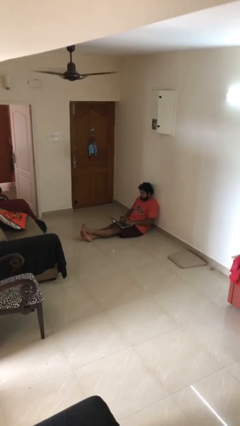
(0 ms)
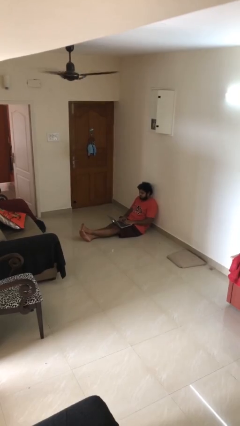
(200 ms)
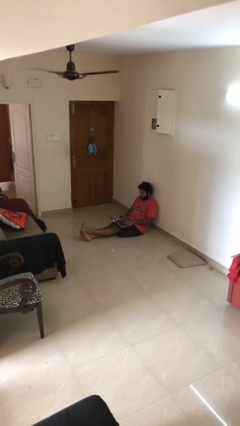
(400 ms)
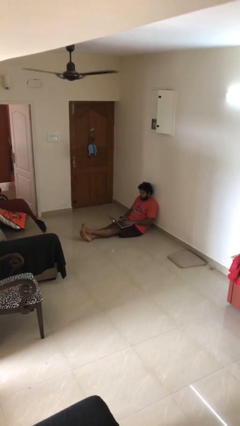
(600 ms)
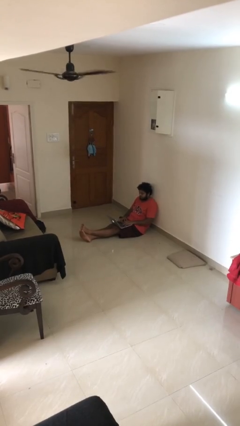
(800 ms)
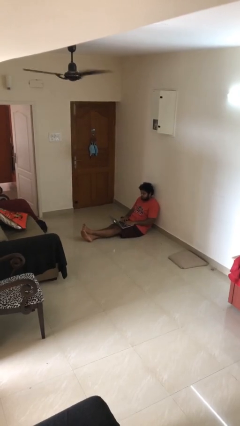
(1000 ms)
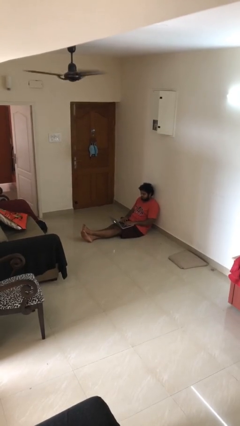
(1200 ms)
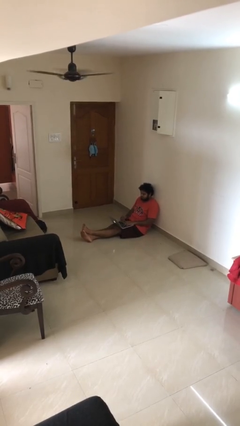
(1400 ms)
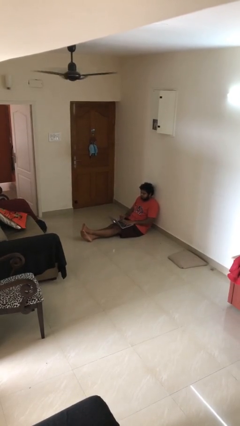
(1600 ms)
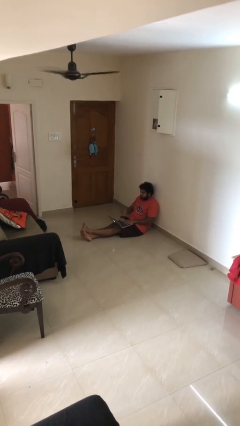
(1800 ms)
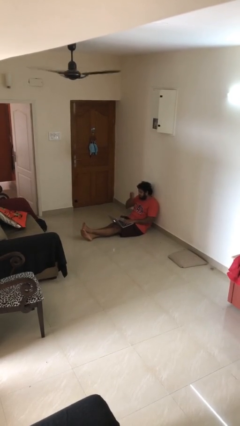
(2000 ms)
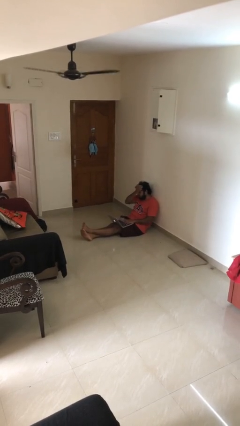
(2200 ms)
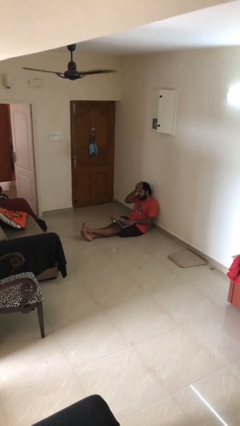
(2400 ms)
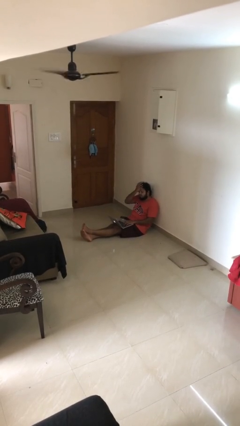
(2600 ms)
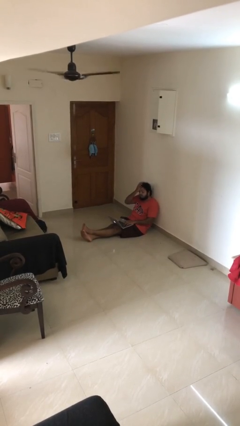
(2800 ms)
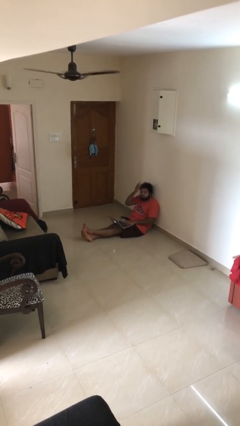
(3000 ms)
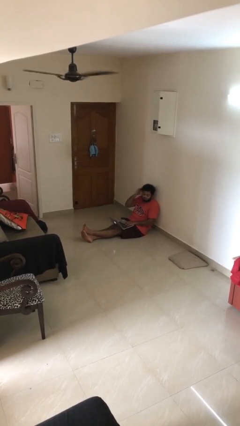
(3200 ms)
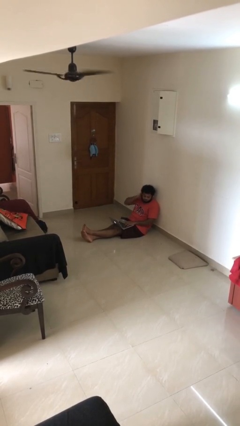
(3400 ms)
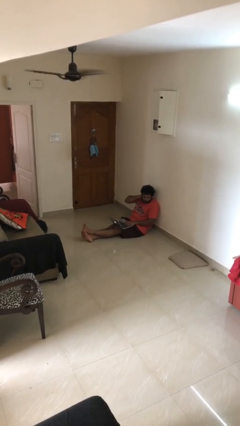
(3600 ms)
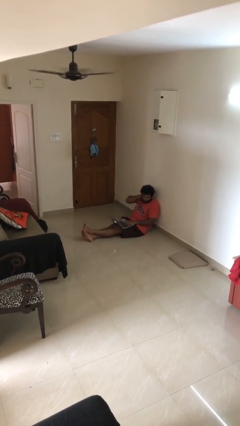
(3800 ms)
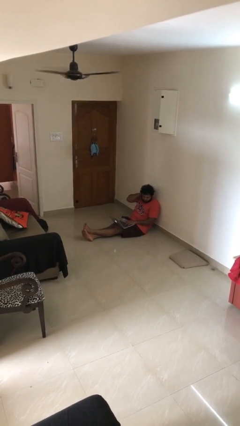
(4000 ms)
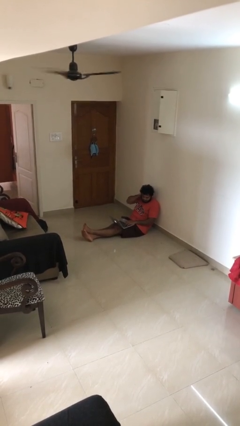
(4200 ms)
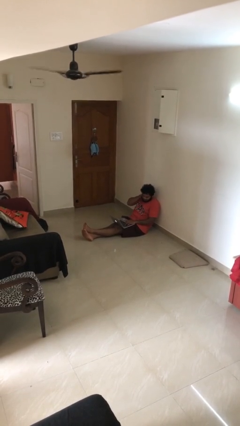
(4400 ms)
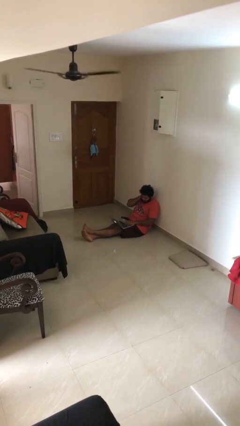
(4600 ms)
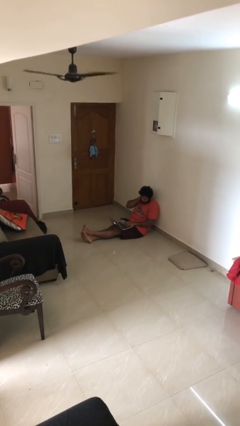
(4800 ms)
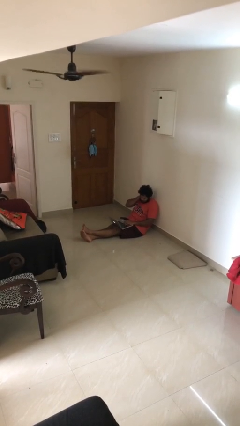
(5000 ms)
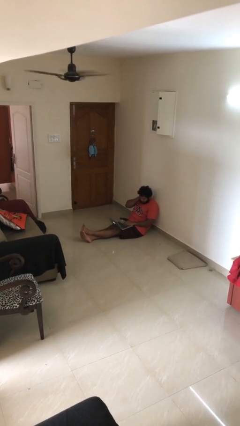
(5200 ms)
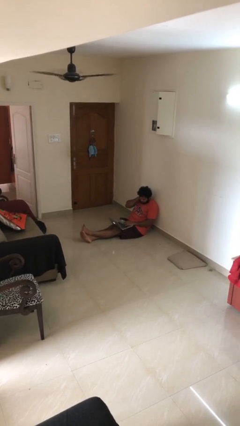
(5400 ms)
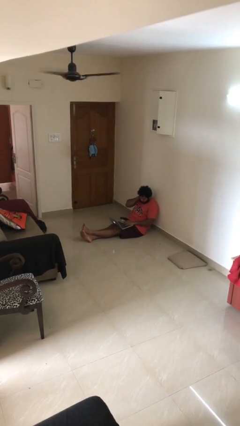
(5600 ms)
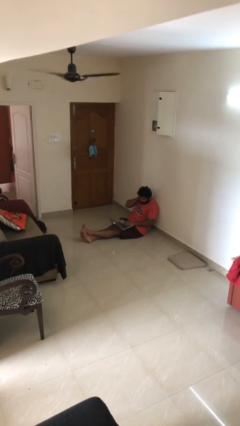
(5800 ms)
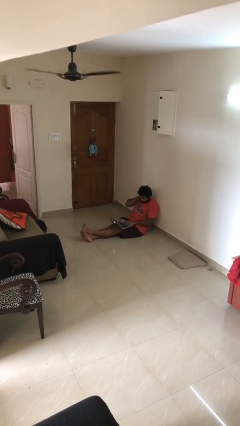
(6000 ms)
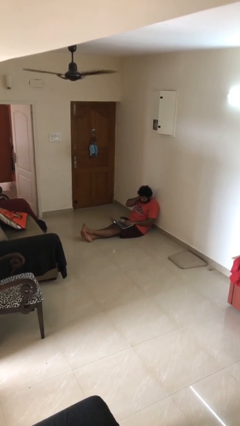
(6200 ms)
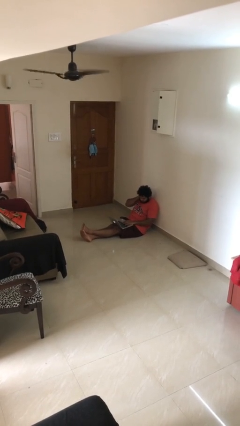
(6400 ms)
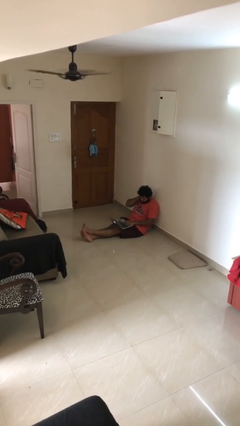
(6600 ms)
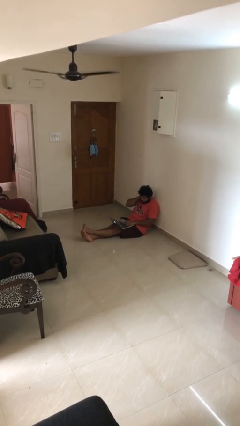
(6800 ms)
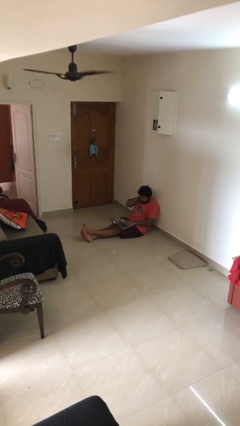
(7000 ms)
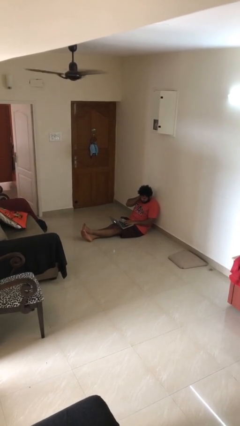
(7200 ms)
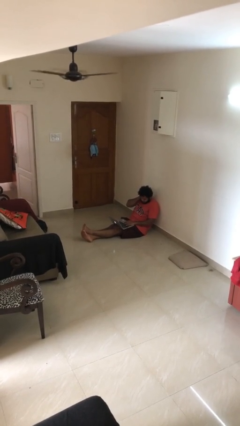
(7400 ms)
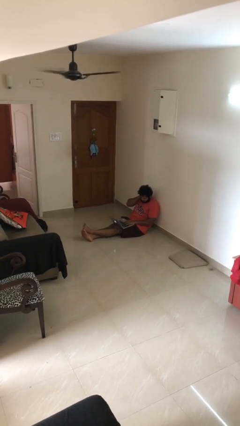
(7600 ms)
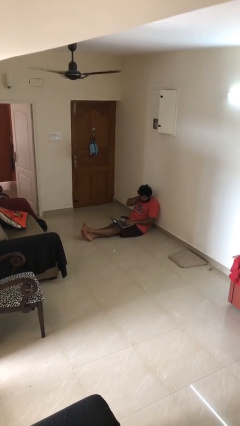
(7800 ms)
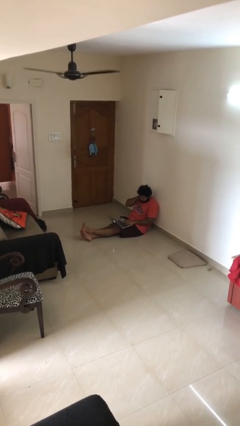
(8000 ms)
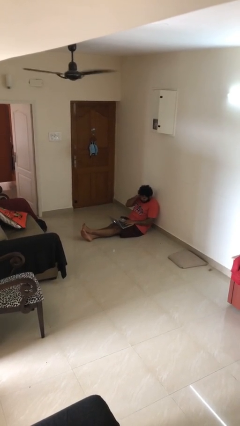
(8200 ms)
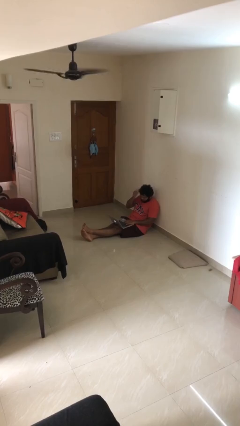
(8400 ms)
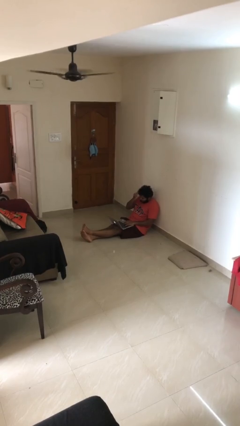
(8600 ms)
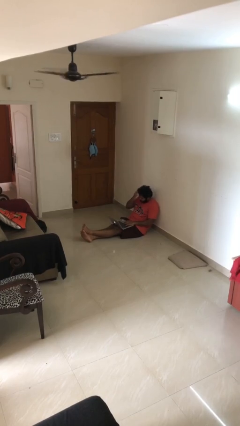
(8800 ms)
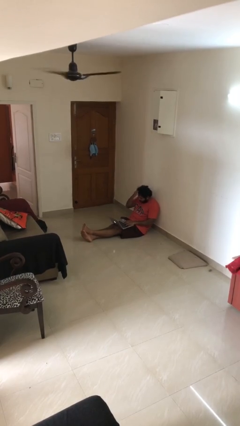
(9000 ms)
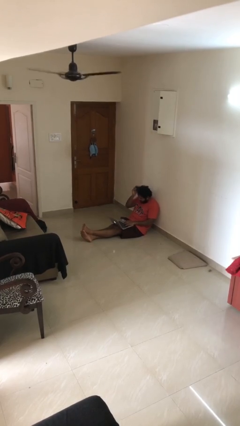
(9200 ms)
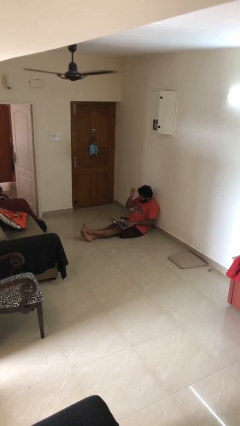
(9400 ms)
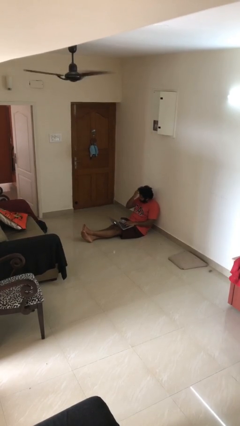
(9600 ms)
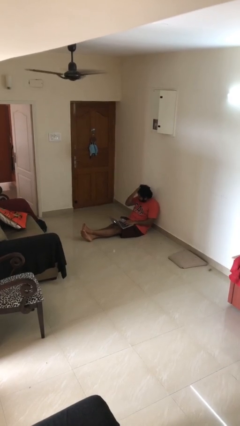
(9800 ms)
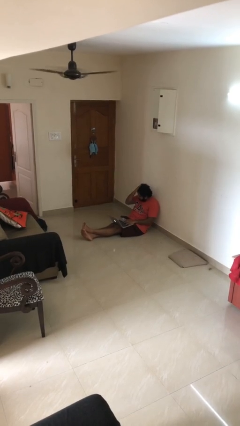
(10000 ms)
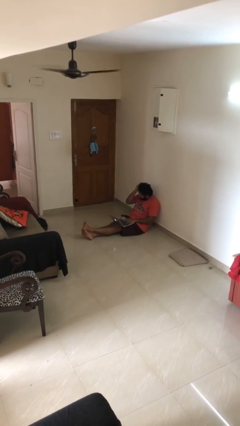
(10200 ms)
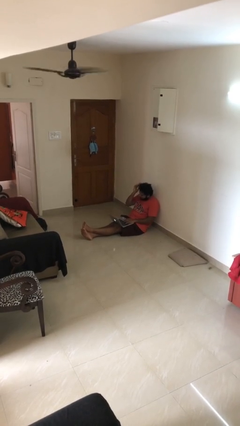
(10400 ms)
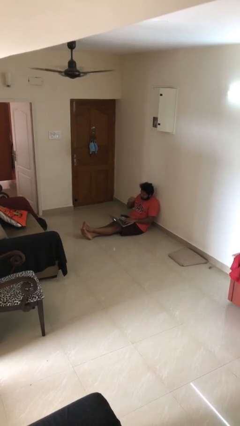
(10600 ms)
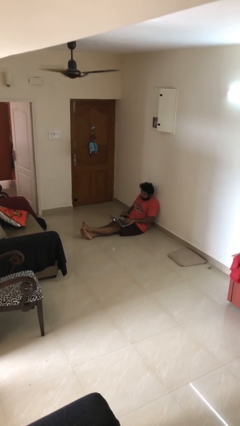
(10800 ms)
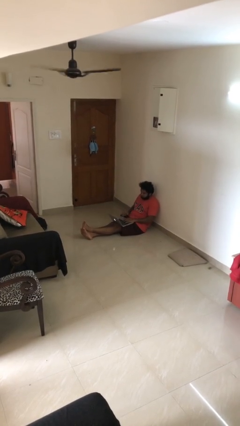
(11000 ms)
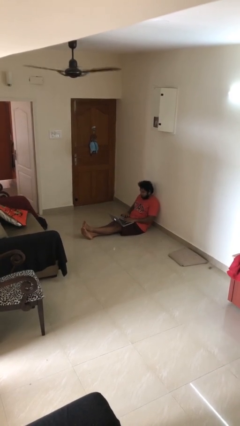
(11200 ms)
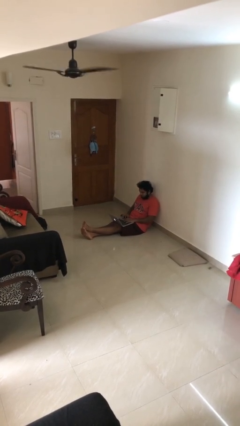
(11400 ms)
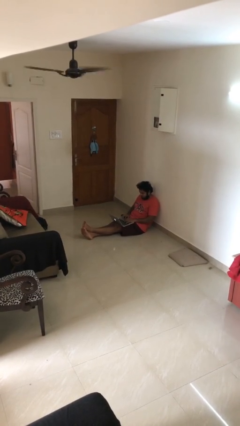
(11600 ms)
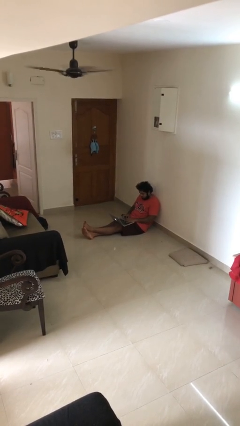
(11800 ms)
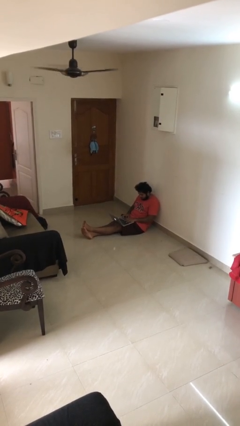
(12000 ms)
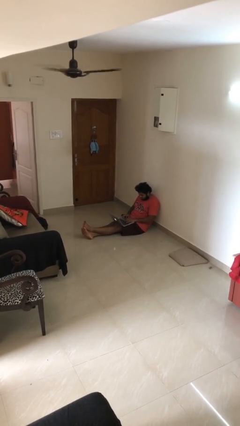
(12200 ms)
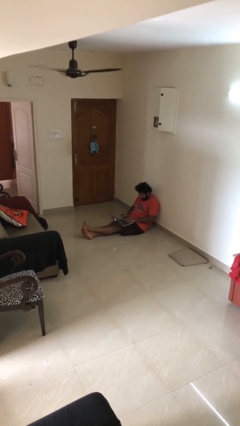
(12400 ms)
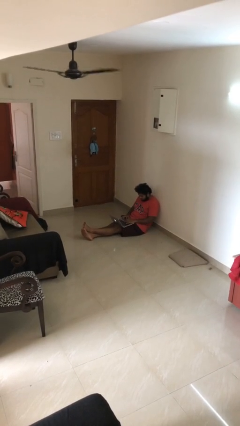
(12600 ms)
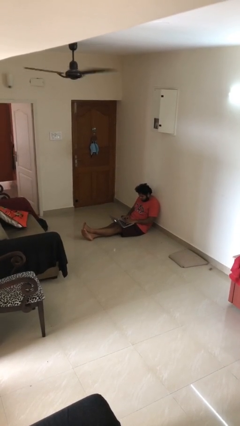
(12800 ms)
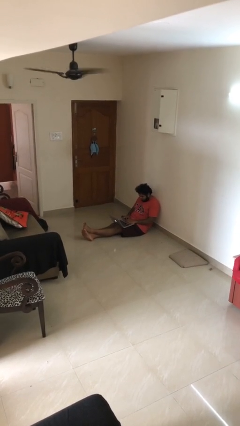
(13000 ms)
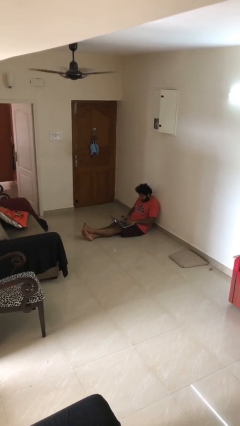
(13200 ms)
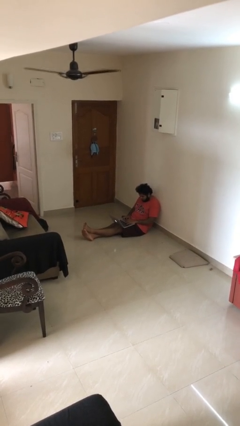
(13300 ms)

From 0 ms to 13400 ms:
person interacts with laptop

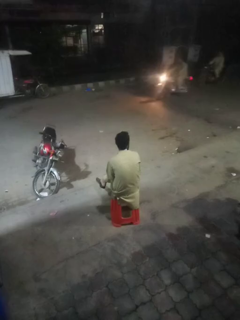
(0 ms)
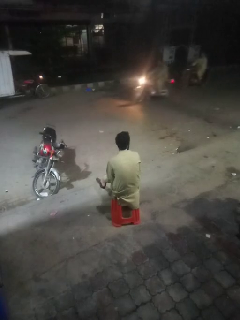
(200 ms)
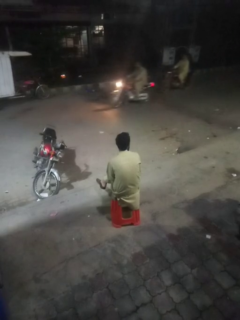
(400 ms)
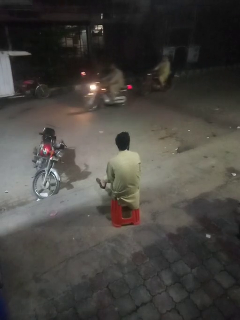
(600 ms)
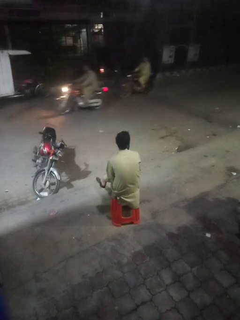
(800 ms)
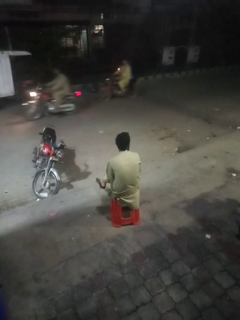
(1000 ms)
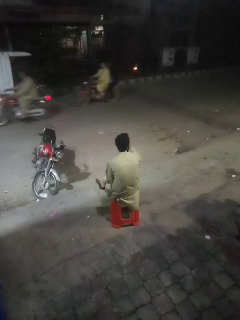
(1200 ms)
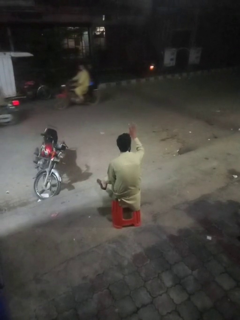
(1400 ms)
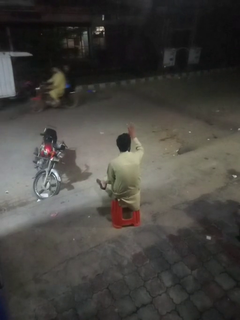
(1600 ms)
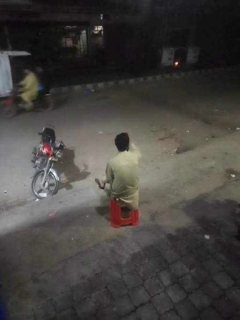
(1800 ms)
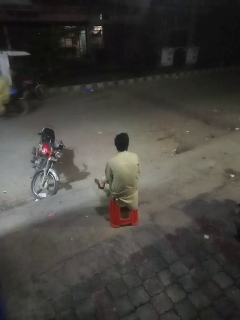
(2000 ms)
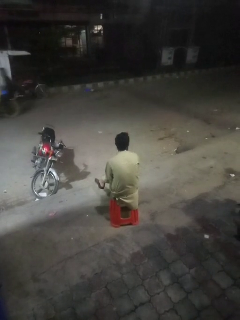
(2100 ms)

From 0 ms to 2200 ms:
person gestures number four

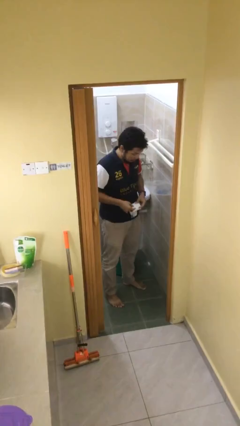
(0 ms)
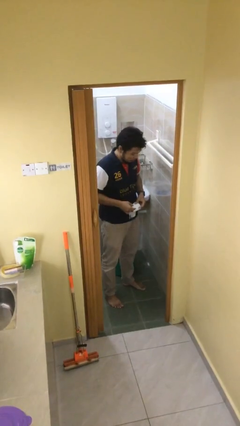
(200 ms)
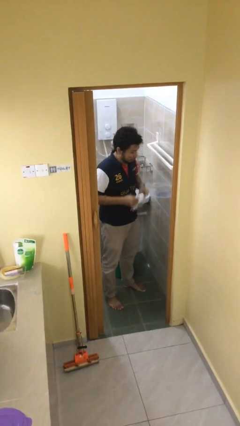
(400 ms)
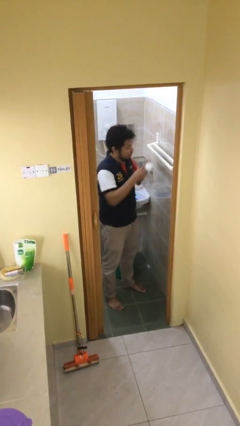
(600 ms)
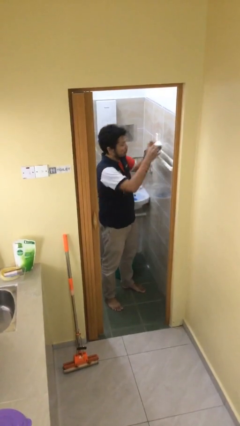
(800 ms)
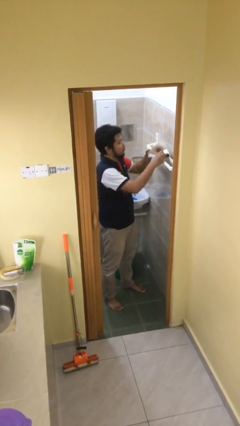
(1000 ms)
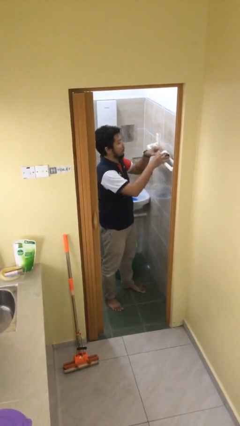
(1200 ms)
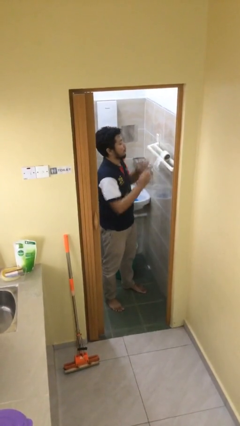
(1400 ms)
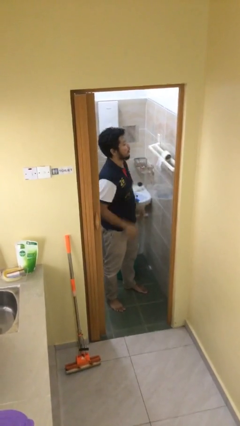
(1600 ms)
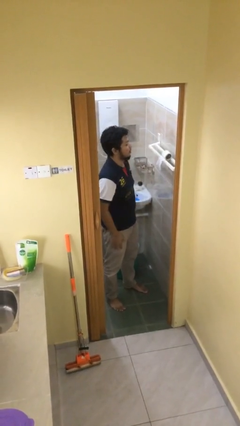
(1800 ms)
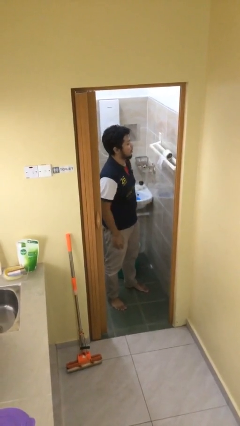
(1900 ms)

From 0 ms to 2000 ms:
person puts down object on countertop

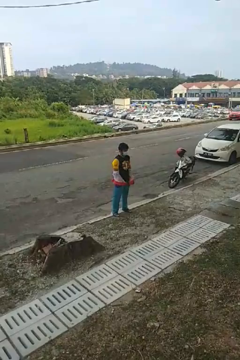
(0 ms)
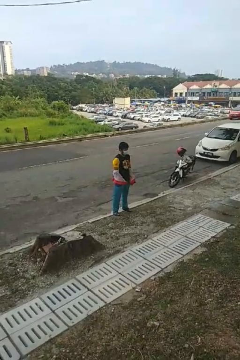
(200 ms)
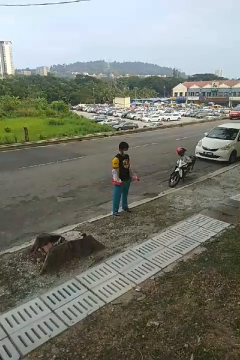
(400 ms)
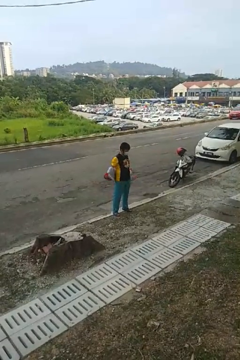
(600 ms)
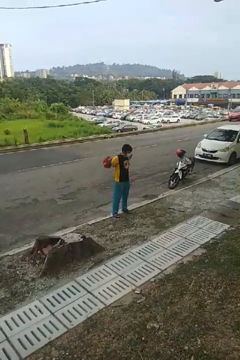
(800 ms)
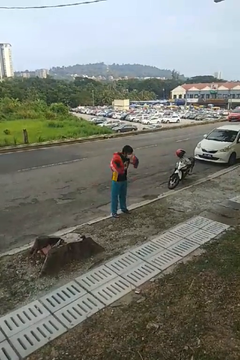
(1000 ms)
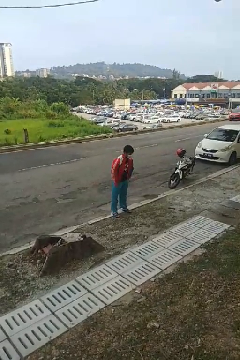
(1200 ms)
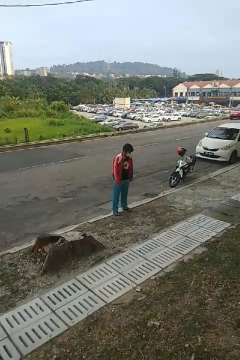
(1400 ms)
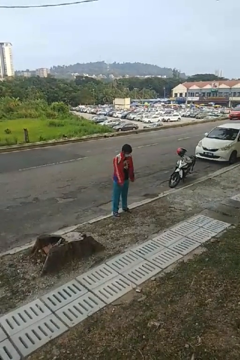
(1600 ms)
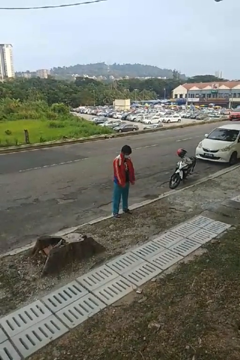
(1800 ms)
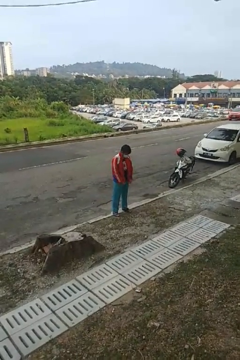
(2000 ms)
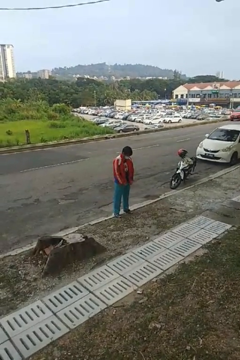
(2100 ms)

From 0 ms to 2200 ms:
person puts on jacket
